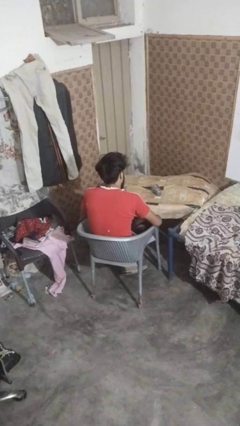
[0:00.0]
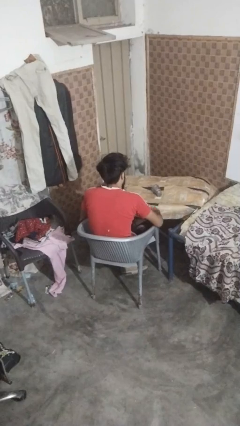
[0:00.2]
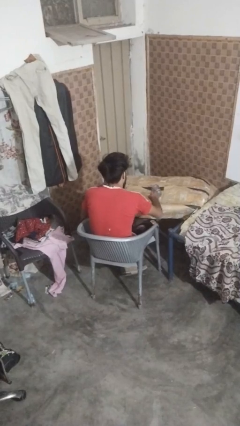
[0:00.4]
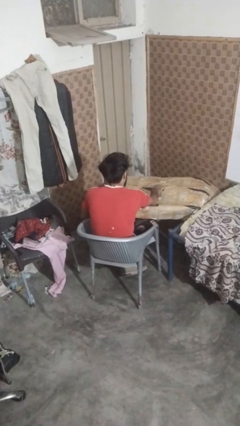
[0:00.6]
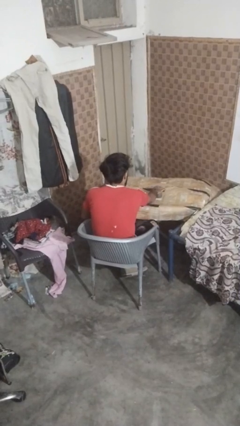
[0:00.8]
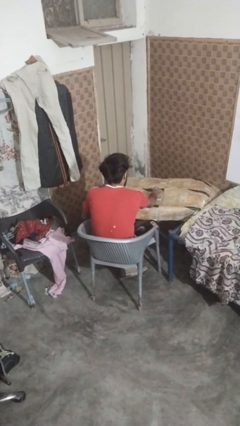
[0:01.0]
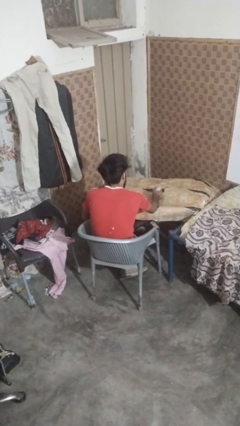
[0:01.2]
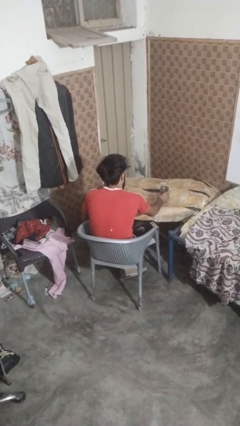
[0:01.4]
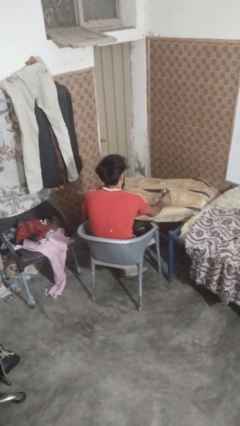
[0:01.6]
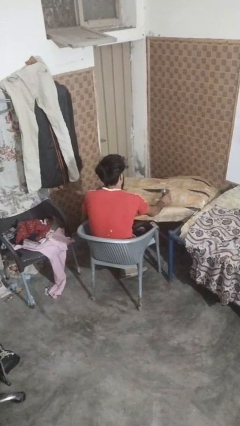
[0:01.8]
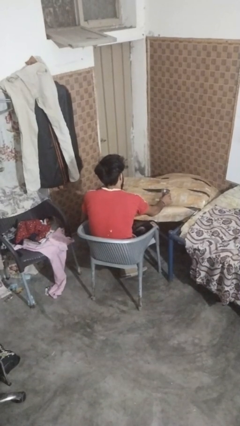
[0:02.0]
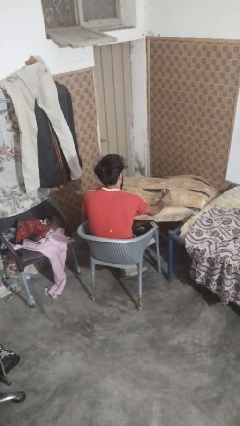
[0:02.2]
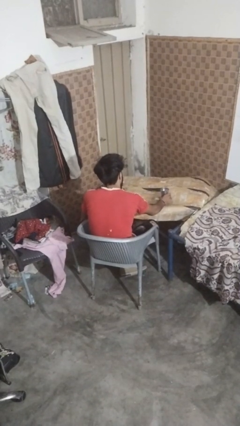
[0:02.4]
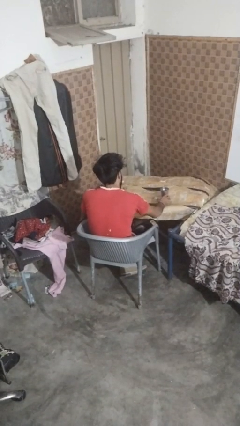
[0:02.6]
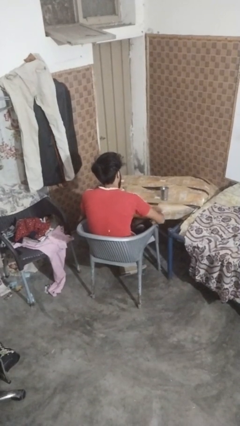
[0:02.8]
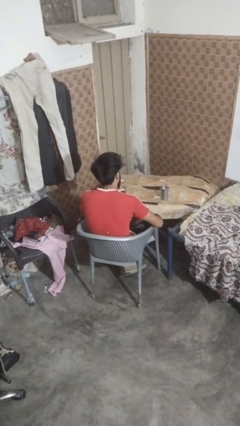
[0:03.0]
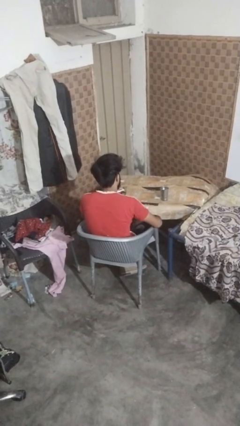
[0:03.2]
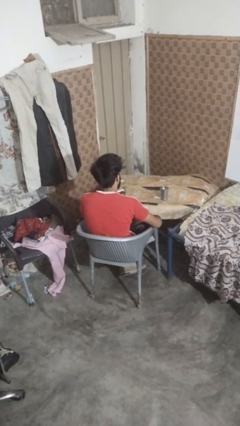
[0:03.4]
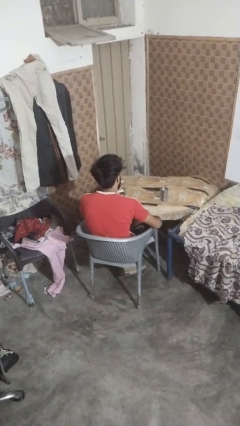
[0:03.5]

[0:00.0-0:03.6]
person sets upright glass

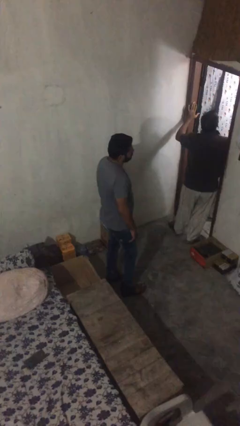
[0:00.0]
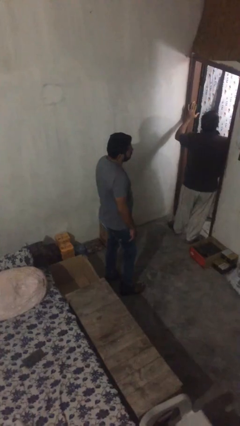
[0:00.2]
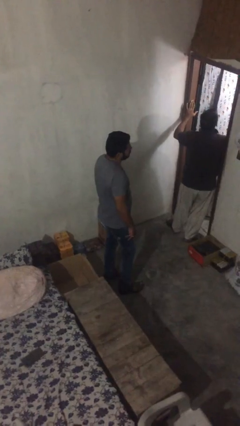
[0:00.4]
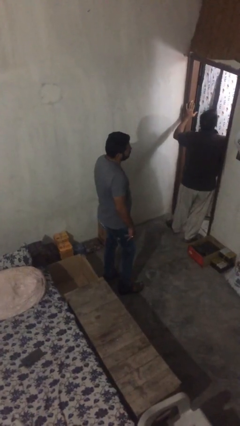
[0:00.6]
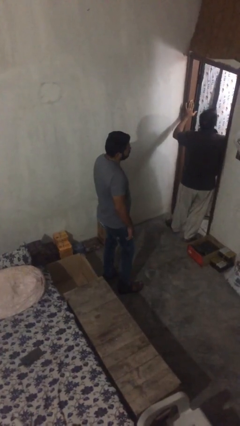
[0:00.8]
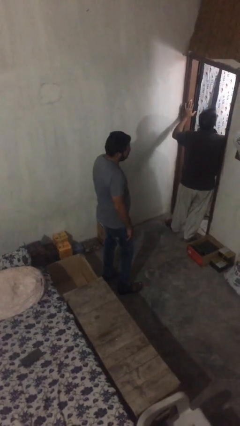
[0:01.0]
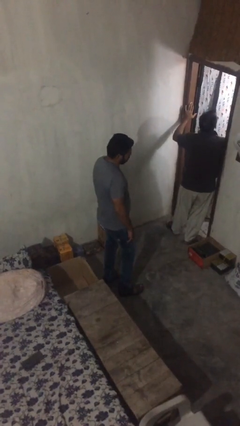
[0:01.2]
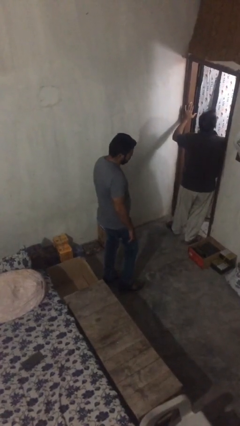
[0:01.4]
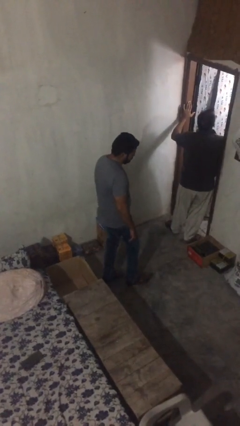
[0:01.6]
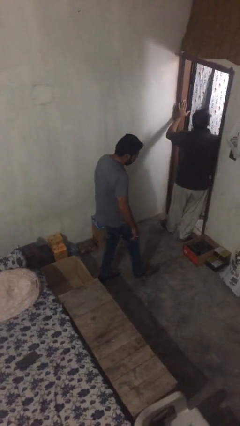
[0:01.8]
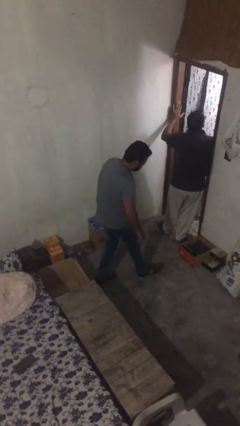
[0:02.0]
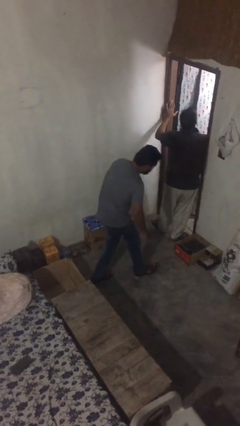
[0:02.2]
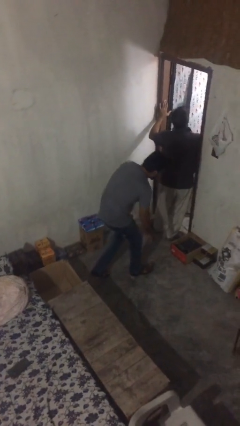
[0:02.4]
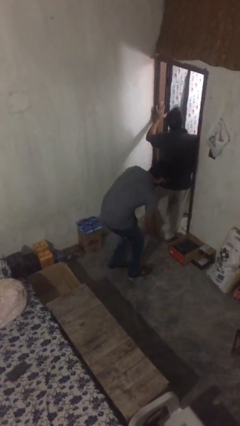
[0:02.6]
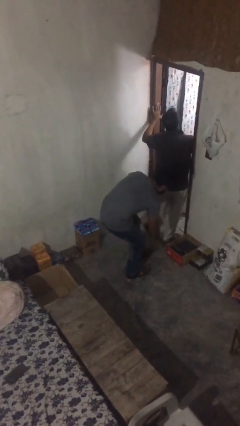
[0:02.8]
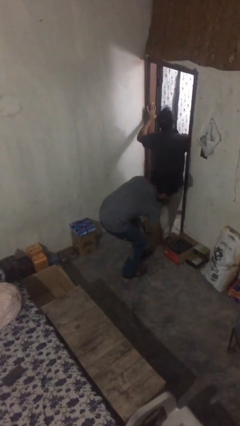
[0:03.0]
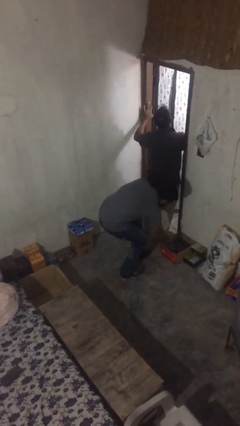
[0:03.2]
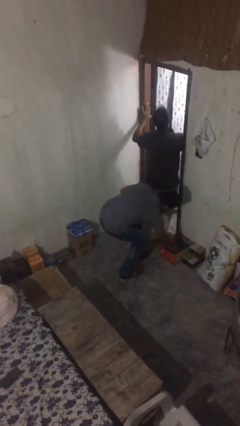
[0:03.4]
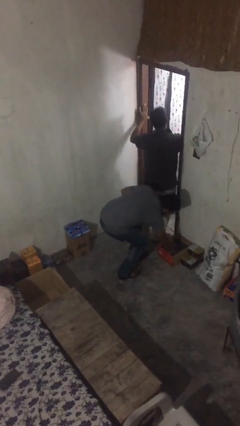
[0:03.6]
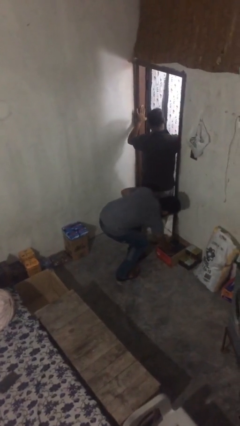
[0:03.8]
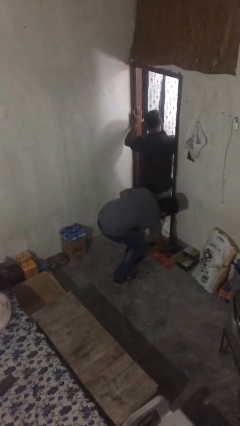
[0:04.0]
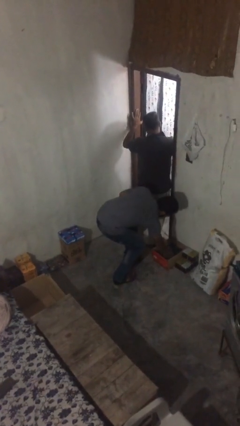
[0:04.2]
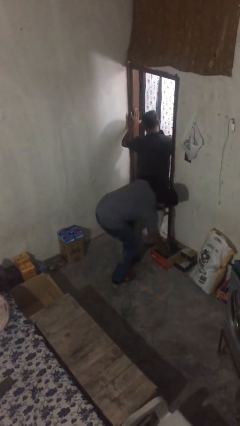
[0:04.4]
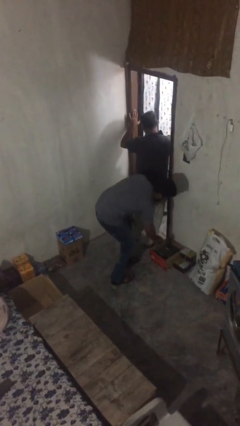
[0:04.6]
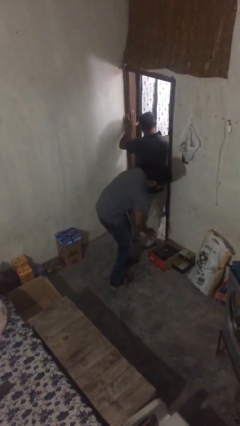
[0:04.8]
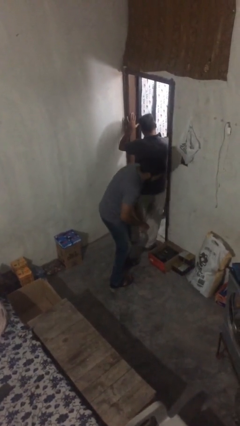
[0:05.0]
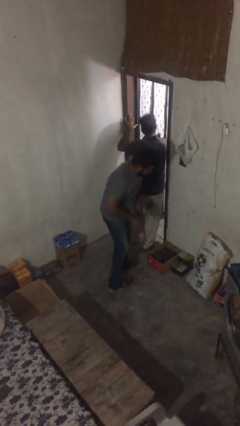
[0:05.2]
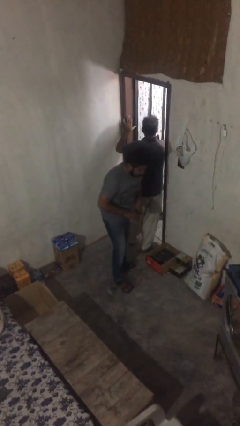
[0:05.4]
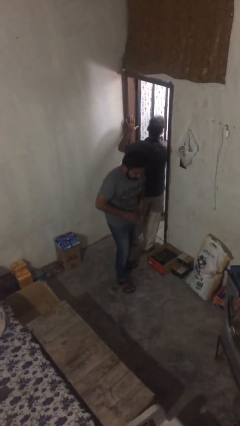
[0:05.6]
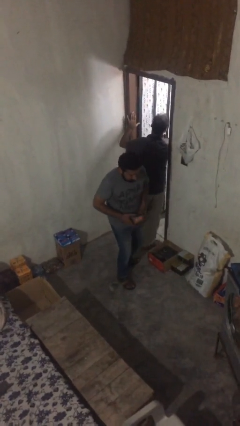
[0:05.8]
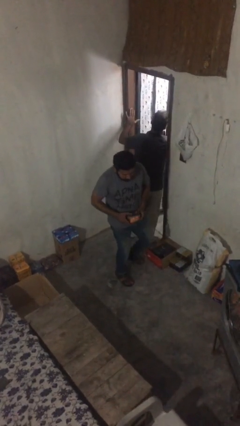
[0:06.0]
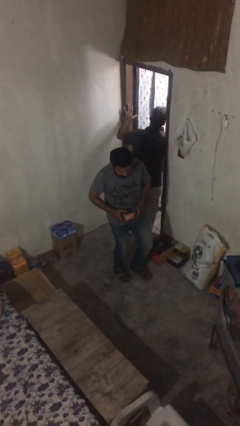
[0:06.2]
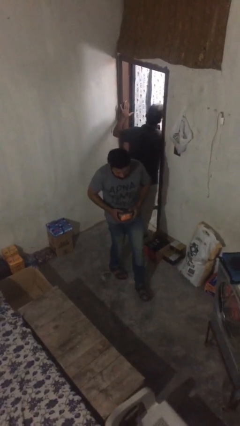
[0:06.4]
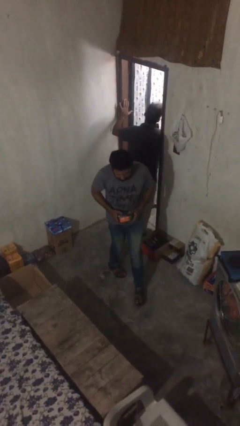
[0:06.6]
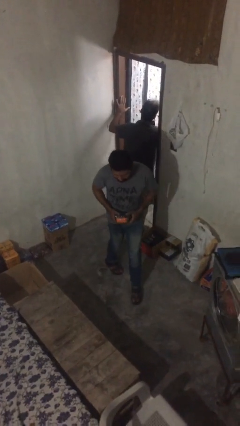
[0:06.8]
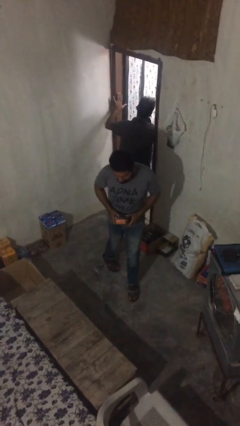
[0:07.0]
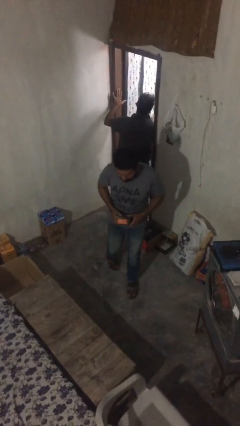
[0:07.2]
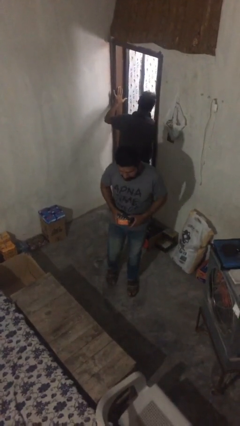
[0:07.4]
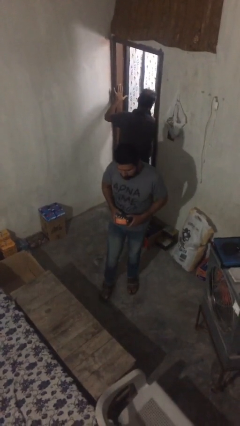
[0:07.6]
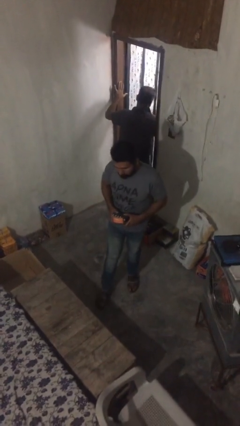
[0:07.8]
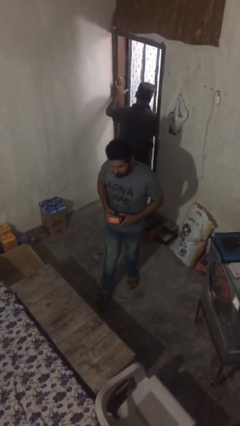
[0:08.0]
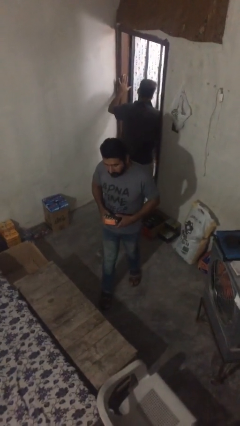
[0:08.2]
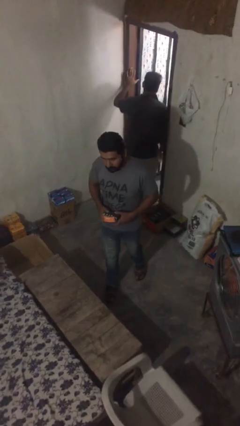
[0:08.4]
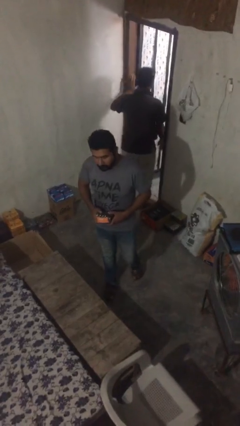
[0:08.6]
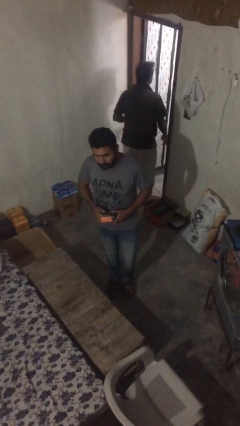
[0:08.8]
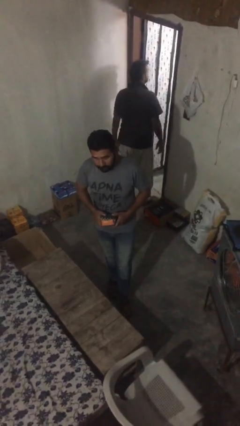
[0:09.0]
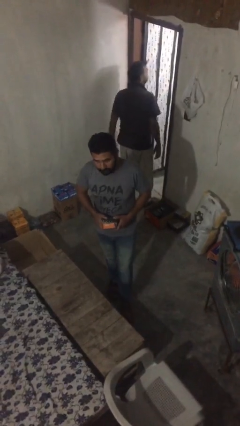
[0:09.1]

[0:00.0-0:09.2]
person steals object from person

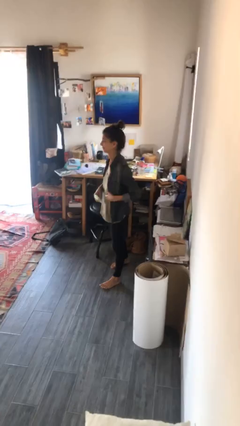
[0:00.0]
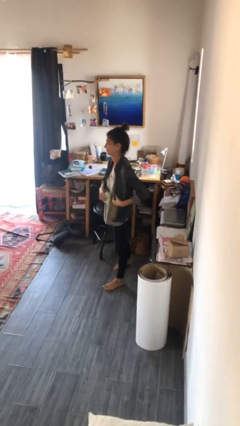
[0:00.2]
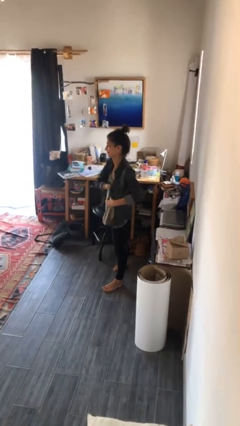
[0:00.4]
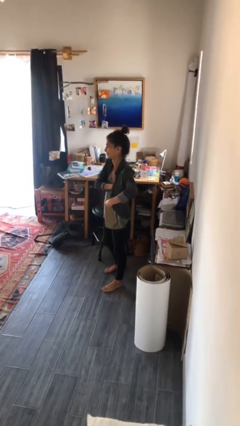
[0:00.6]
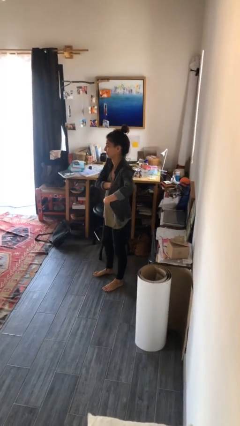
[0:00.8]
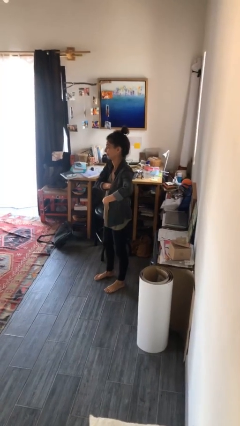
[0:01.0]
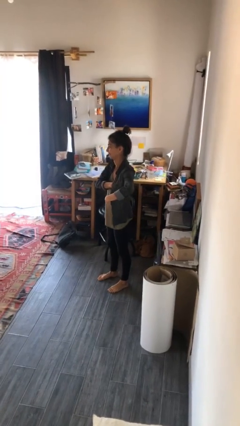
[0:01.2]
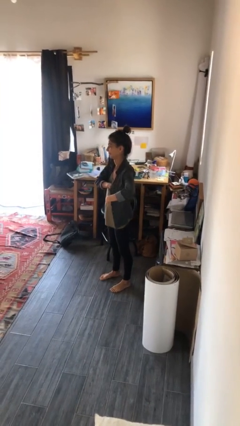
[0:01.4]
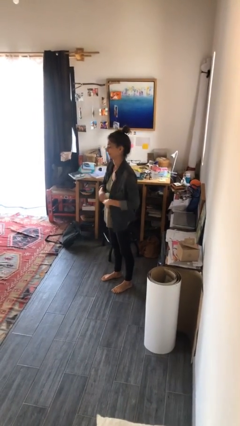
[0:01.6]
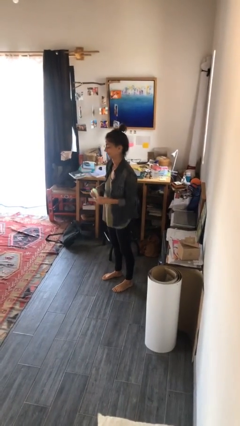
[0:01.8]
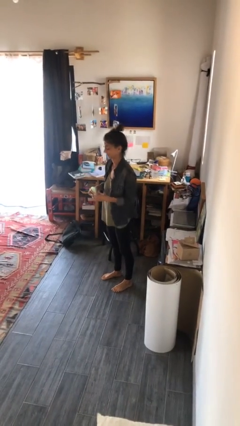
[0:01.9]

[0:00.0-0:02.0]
person applies deodorant

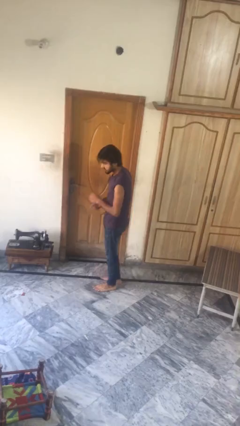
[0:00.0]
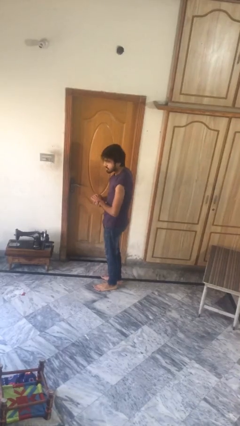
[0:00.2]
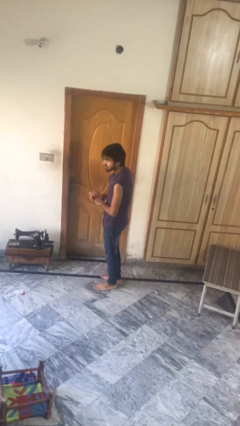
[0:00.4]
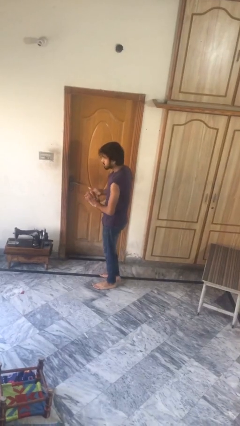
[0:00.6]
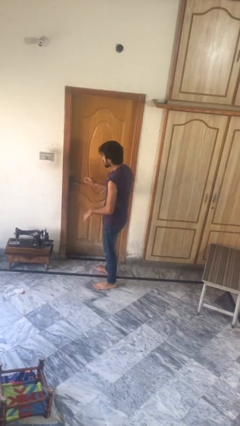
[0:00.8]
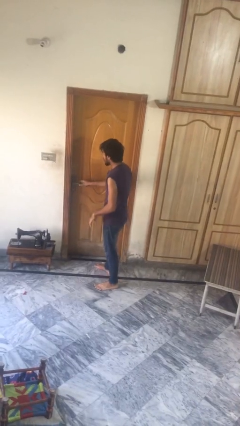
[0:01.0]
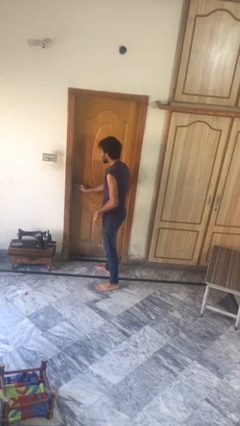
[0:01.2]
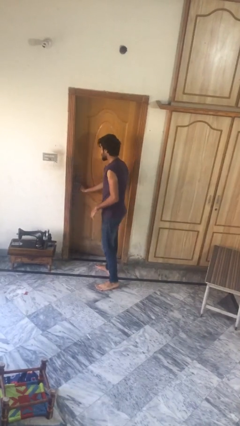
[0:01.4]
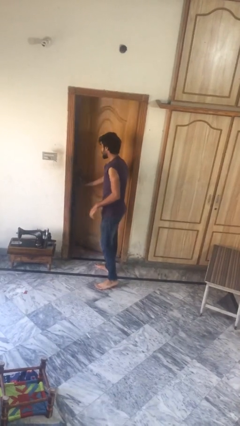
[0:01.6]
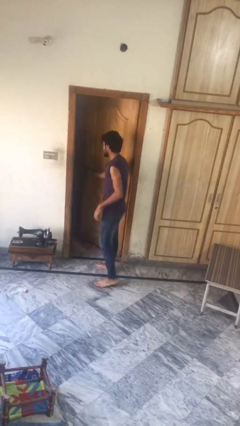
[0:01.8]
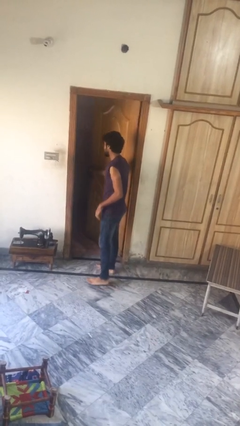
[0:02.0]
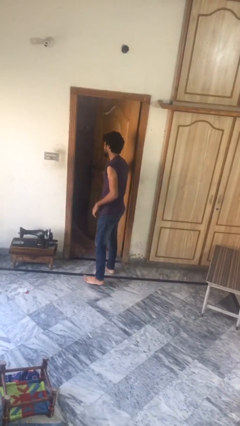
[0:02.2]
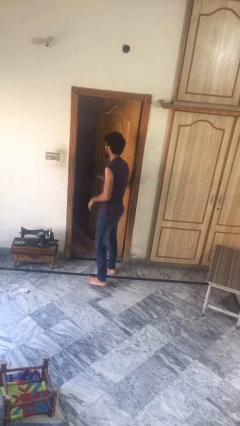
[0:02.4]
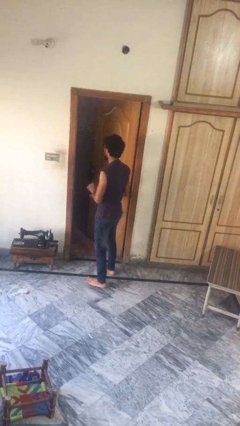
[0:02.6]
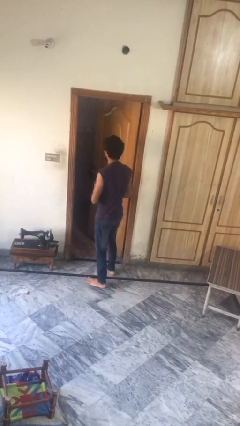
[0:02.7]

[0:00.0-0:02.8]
person opens facility door

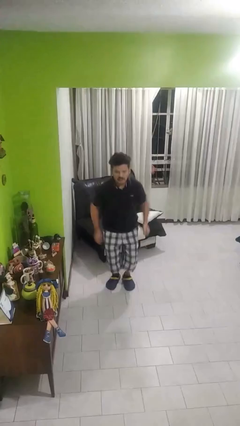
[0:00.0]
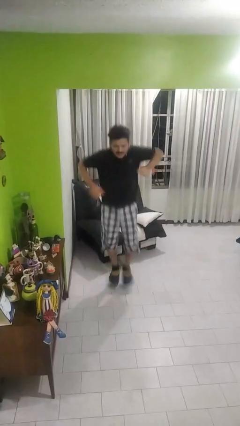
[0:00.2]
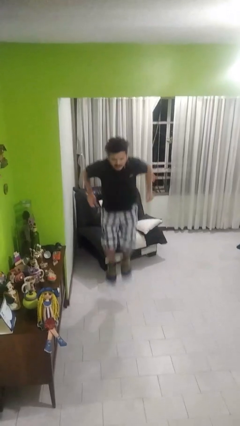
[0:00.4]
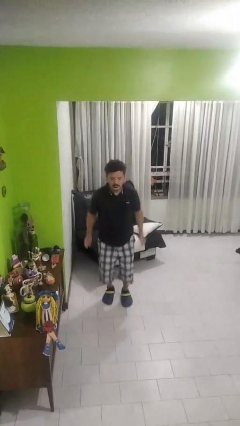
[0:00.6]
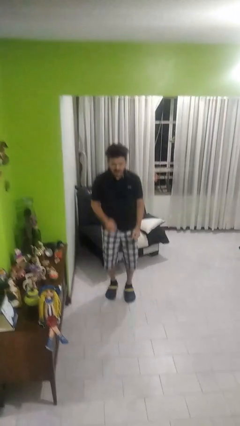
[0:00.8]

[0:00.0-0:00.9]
person jumps
